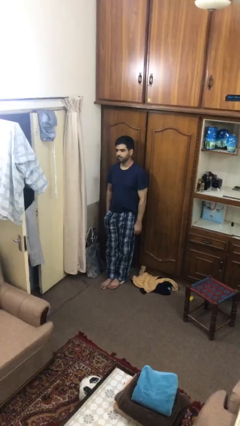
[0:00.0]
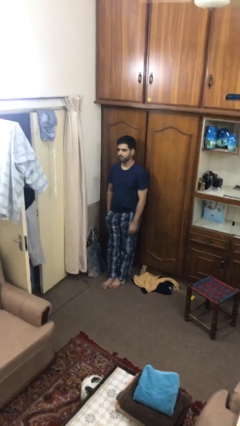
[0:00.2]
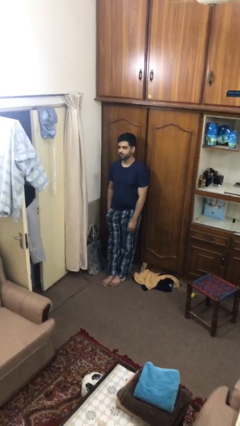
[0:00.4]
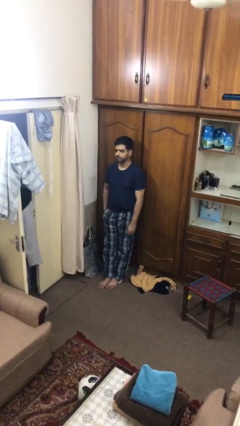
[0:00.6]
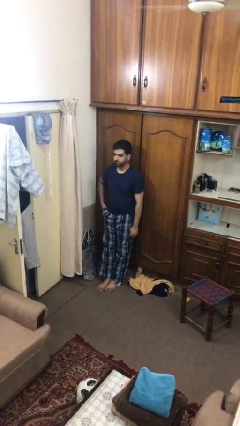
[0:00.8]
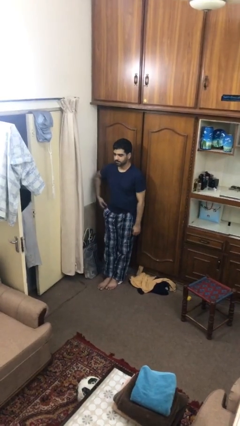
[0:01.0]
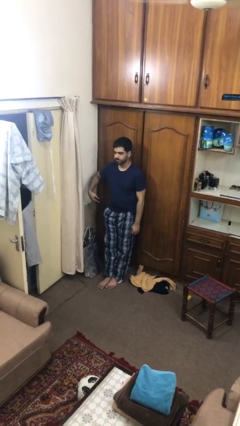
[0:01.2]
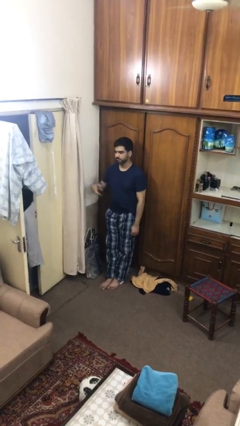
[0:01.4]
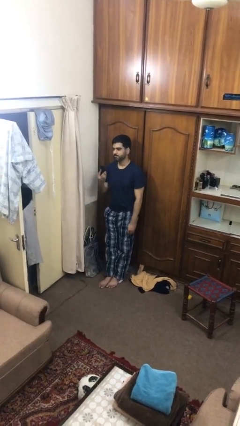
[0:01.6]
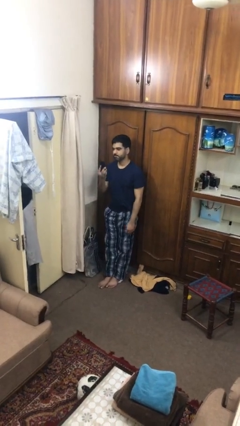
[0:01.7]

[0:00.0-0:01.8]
person takes phone from pocket

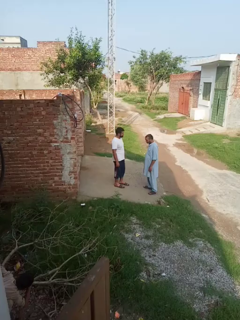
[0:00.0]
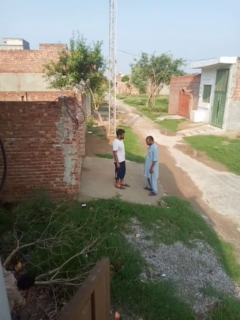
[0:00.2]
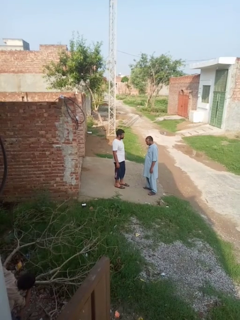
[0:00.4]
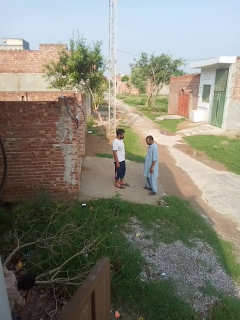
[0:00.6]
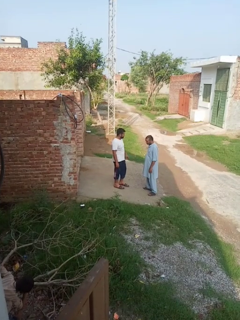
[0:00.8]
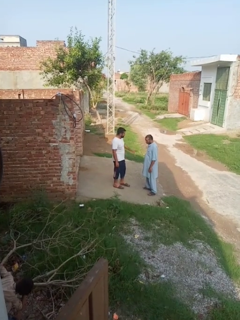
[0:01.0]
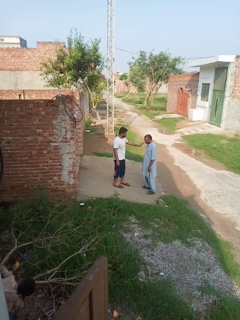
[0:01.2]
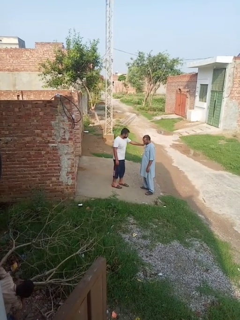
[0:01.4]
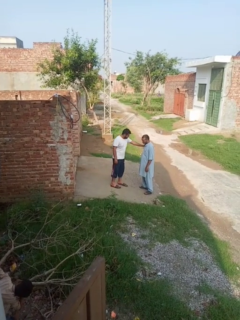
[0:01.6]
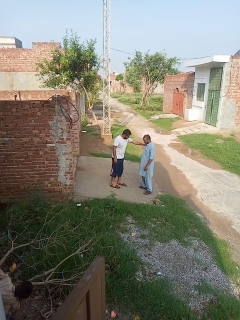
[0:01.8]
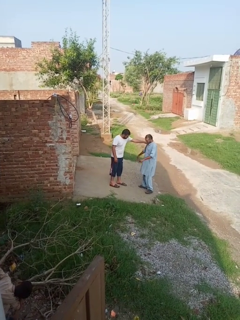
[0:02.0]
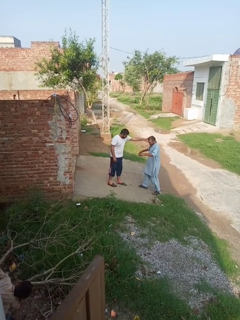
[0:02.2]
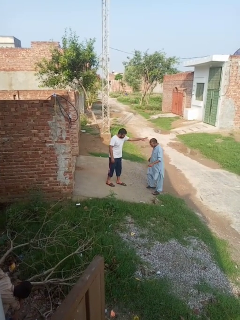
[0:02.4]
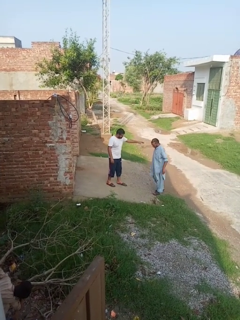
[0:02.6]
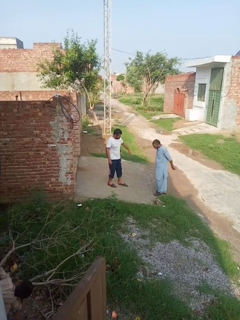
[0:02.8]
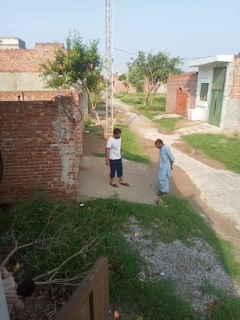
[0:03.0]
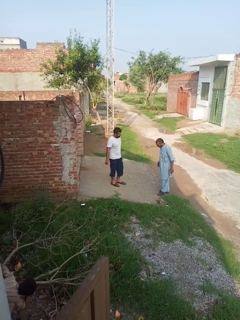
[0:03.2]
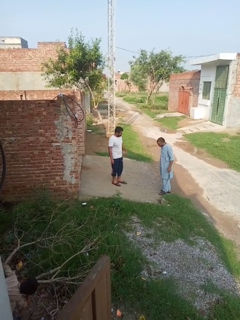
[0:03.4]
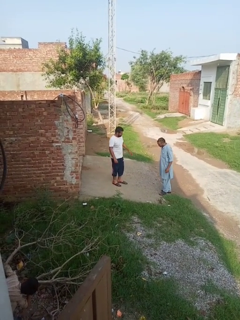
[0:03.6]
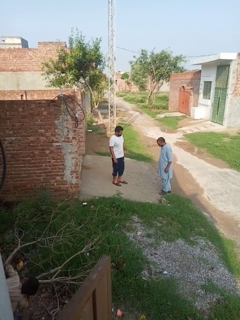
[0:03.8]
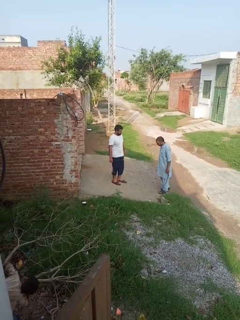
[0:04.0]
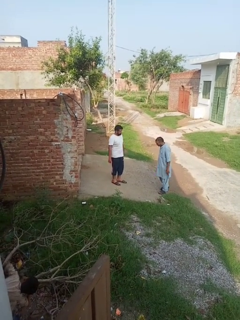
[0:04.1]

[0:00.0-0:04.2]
person shoves person

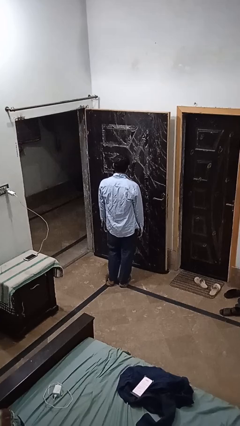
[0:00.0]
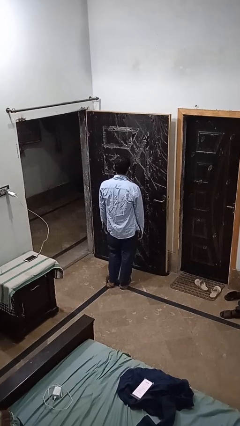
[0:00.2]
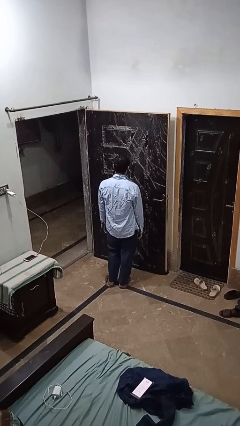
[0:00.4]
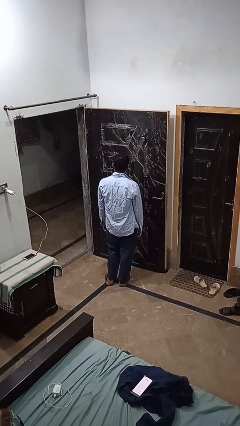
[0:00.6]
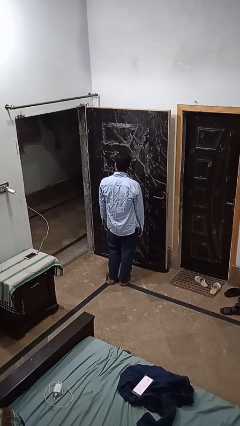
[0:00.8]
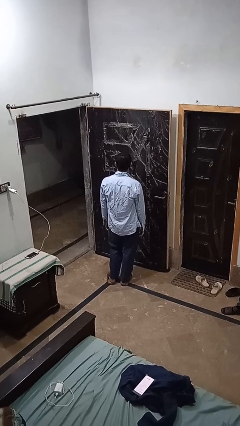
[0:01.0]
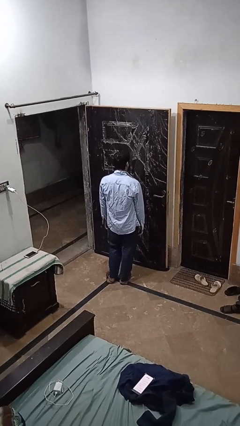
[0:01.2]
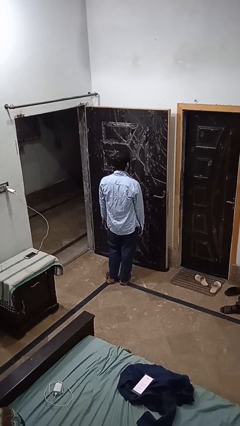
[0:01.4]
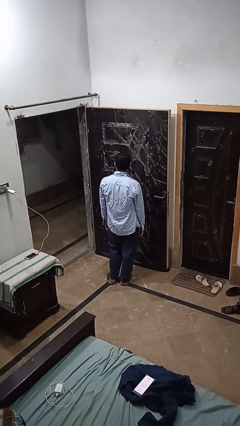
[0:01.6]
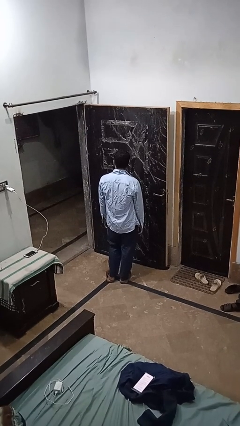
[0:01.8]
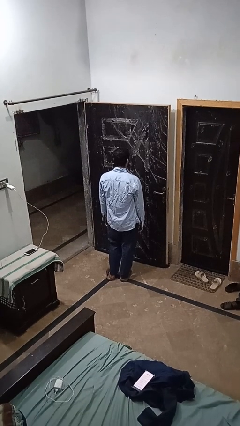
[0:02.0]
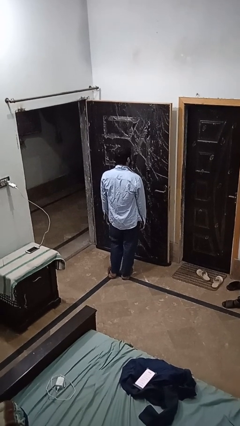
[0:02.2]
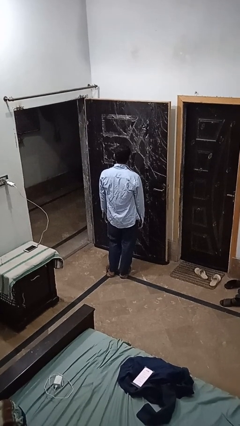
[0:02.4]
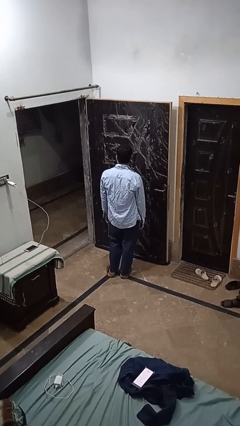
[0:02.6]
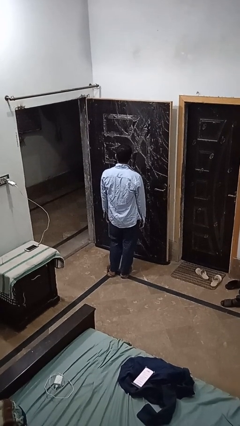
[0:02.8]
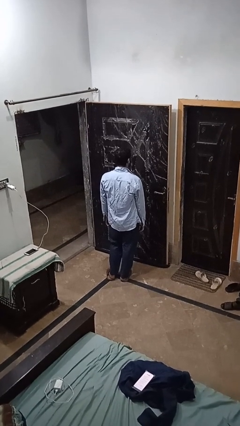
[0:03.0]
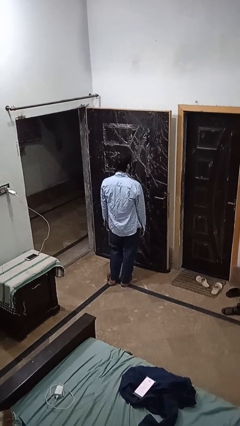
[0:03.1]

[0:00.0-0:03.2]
person shakes head

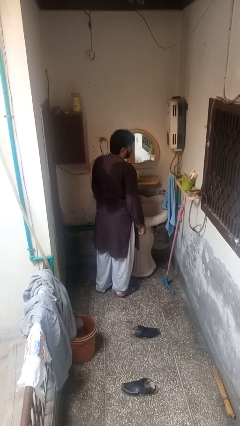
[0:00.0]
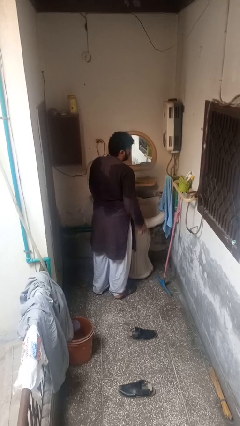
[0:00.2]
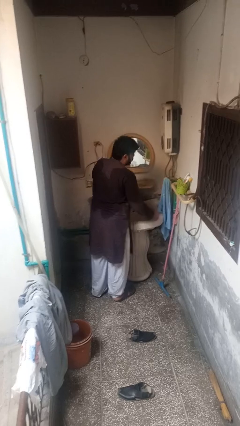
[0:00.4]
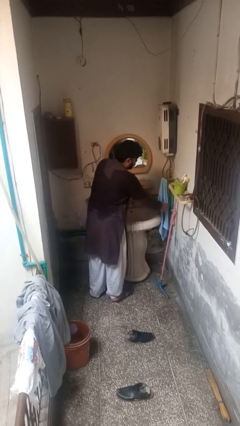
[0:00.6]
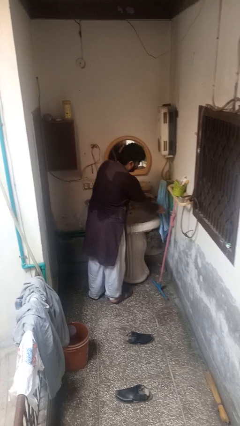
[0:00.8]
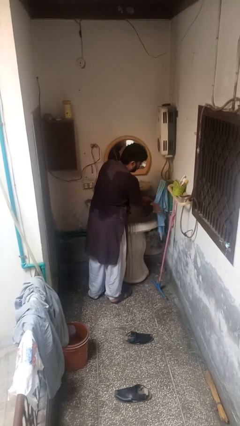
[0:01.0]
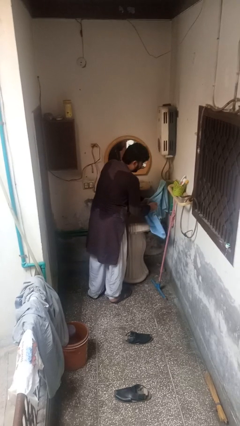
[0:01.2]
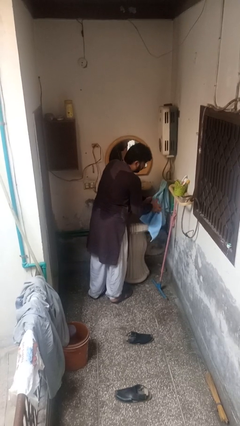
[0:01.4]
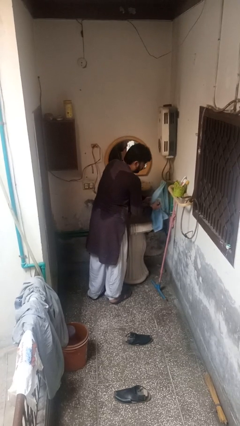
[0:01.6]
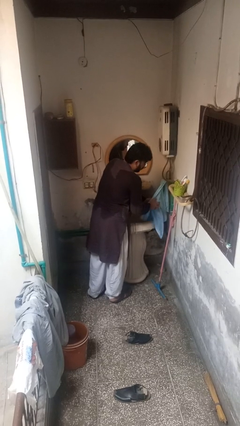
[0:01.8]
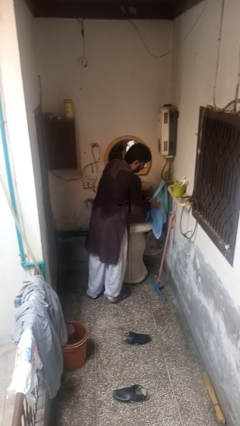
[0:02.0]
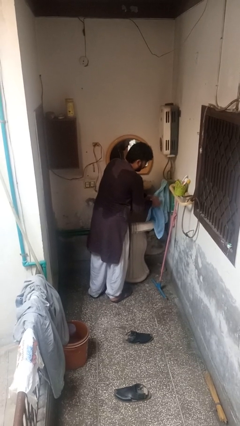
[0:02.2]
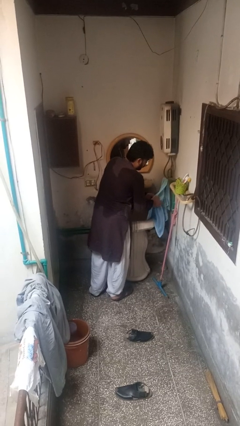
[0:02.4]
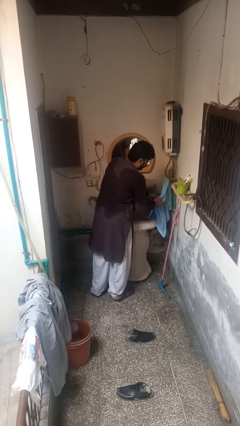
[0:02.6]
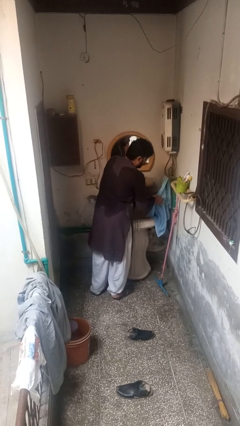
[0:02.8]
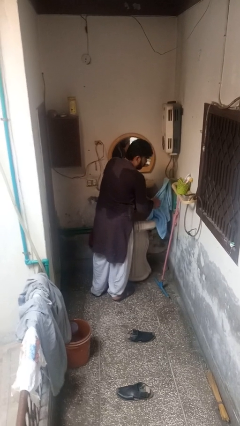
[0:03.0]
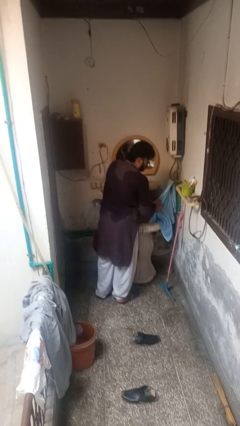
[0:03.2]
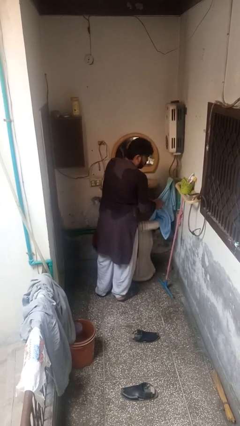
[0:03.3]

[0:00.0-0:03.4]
person dries hands with towel

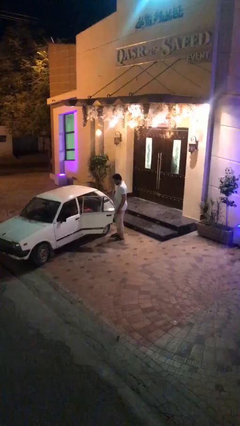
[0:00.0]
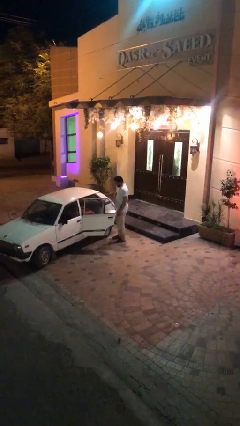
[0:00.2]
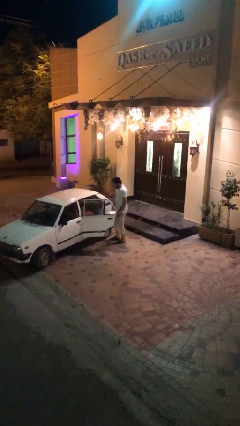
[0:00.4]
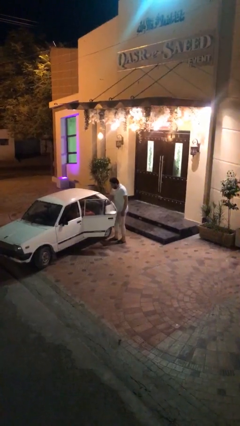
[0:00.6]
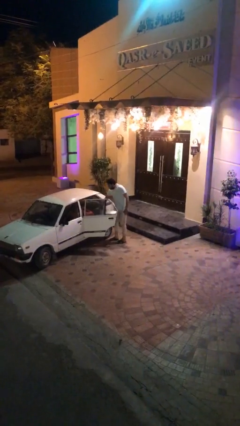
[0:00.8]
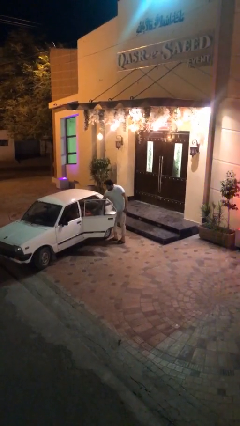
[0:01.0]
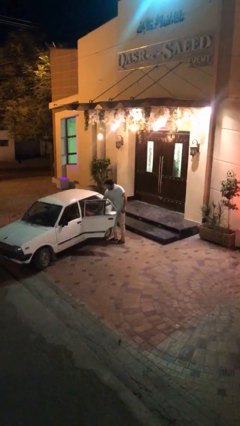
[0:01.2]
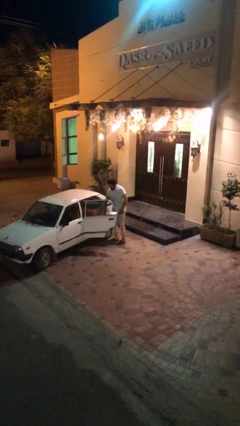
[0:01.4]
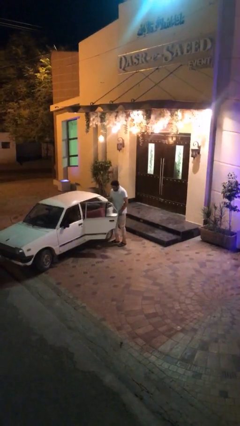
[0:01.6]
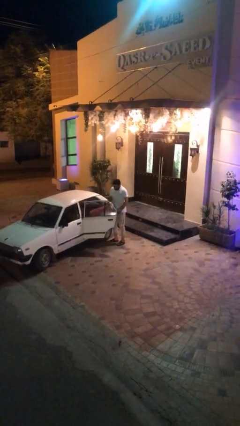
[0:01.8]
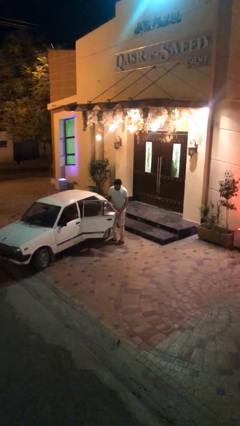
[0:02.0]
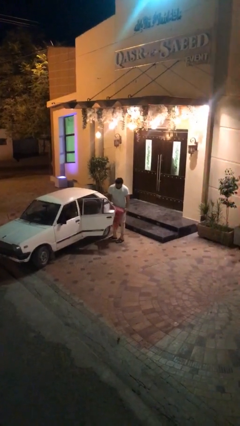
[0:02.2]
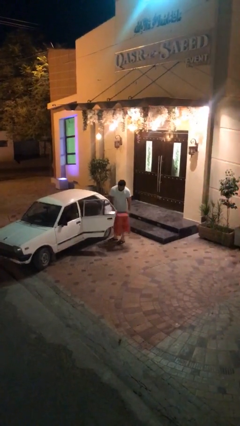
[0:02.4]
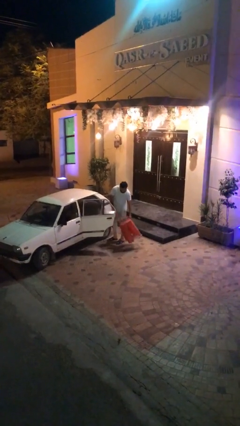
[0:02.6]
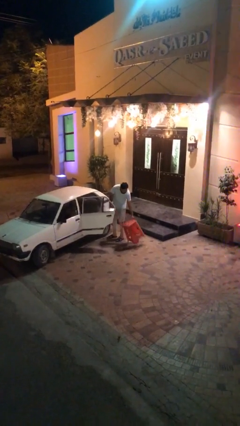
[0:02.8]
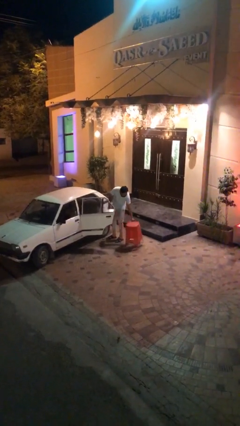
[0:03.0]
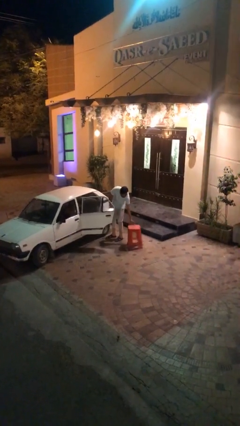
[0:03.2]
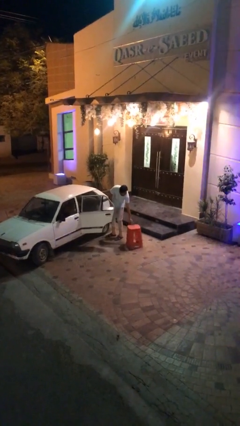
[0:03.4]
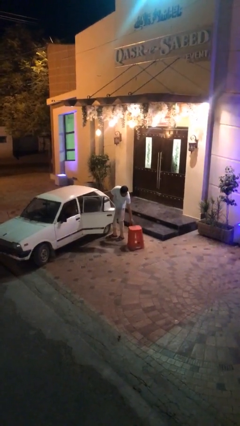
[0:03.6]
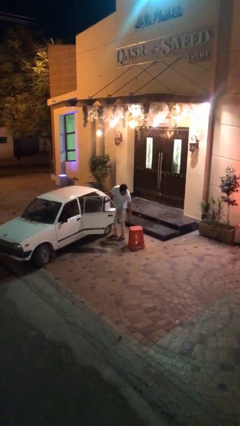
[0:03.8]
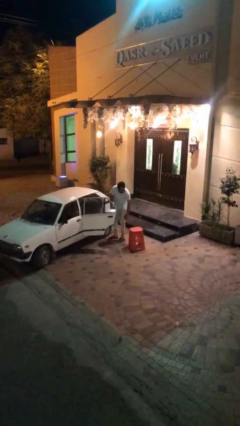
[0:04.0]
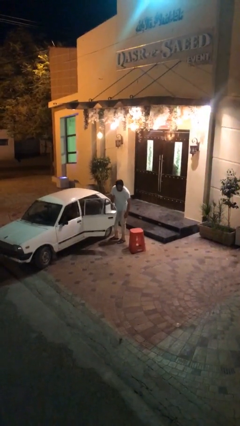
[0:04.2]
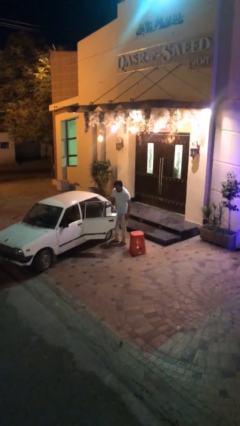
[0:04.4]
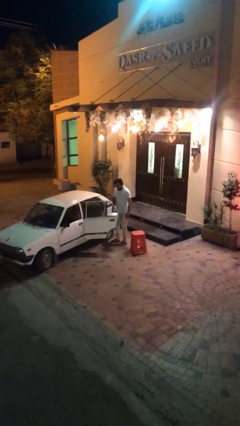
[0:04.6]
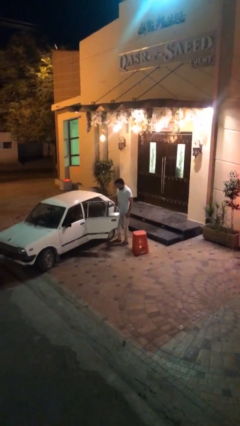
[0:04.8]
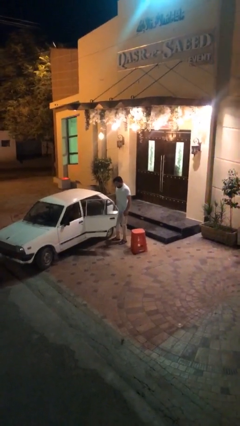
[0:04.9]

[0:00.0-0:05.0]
person unloads car

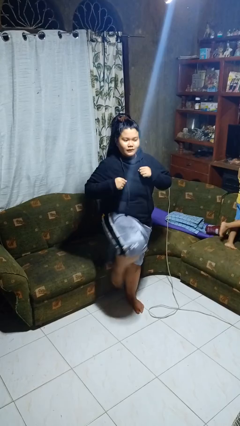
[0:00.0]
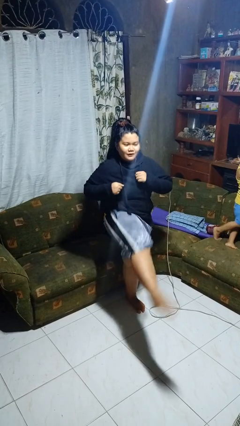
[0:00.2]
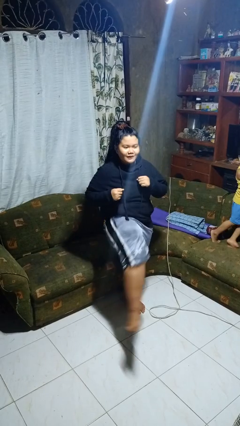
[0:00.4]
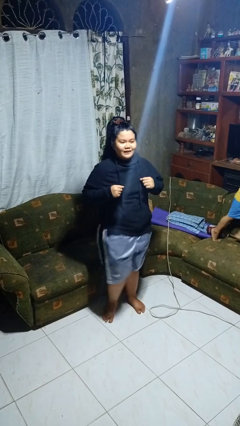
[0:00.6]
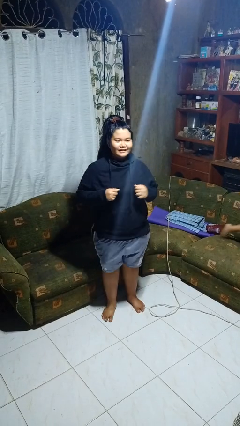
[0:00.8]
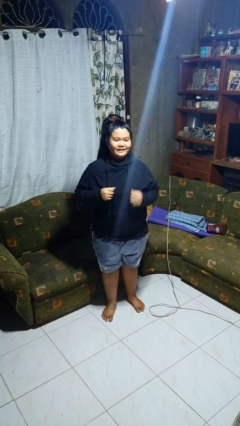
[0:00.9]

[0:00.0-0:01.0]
person karate kicks
